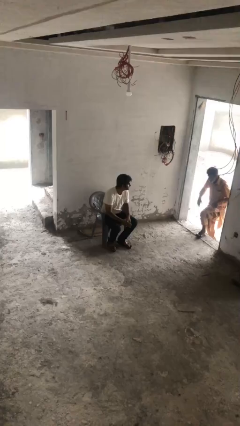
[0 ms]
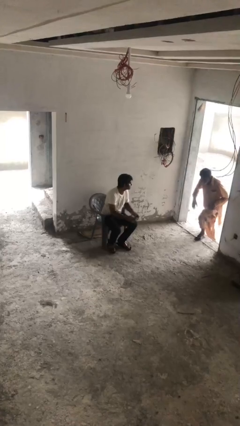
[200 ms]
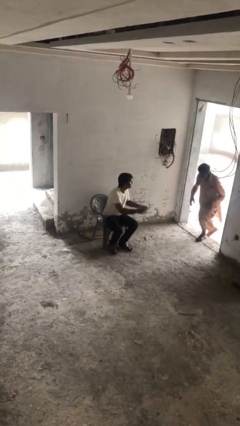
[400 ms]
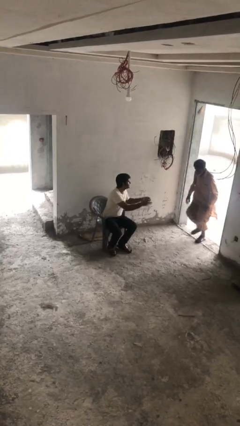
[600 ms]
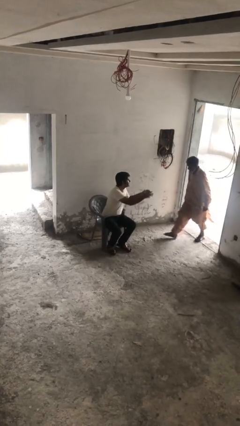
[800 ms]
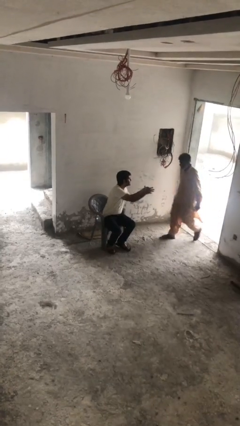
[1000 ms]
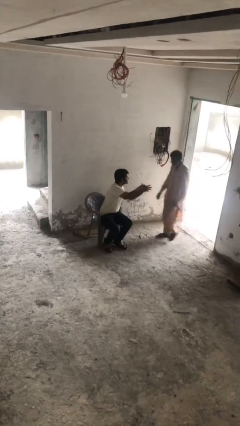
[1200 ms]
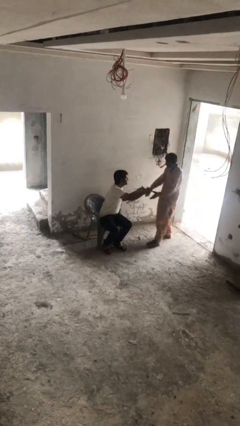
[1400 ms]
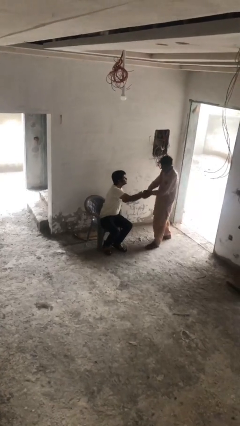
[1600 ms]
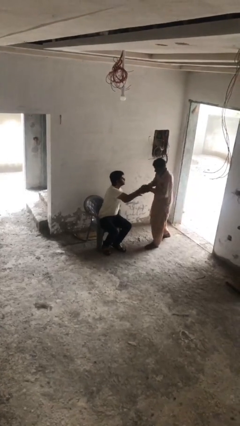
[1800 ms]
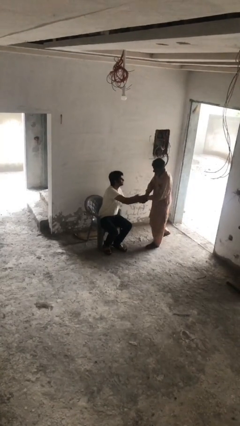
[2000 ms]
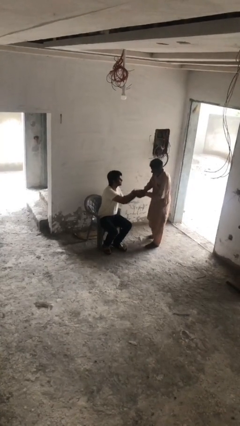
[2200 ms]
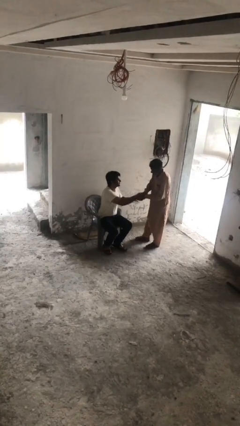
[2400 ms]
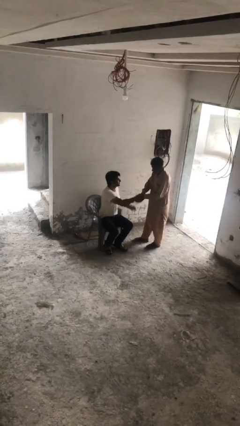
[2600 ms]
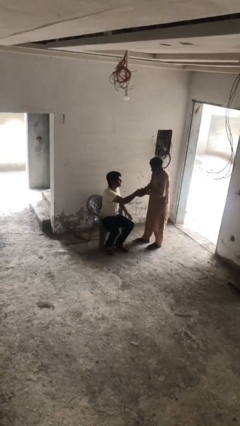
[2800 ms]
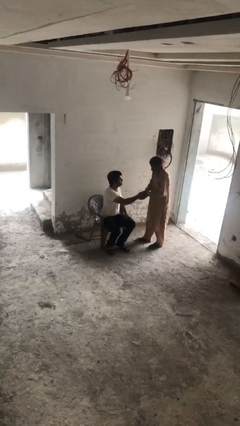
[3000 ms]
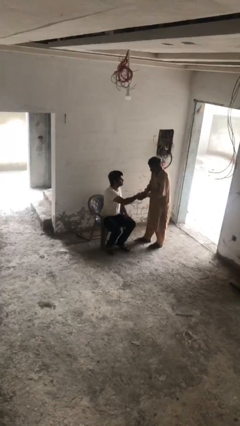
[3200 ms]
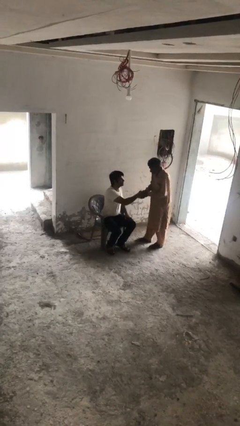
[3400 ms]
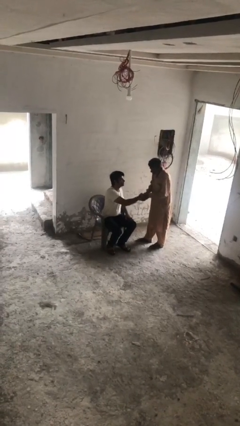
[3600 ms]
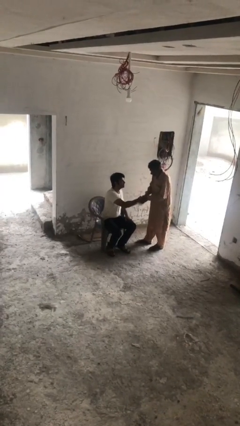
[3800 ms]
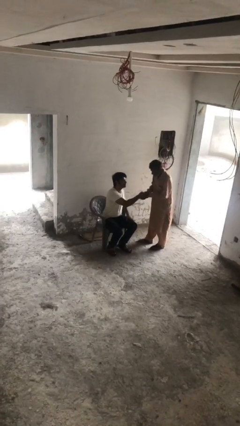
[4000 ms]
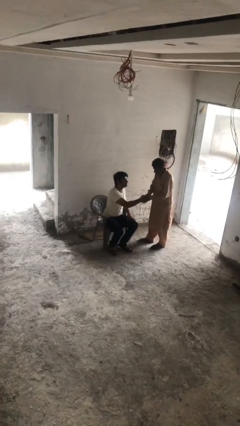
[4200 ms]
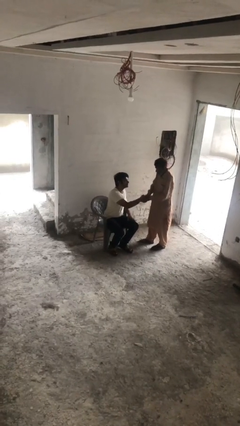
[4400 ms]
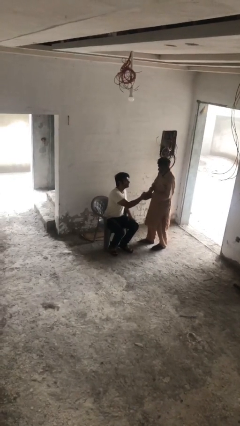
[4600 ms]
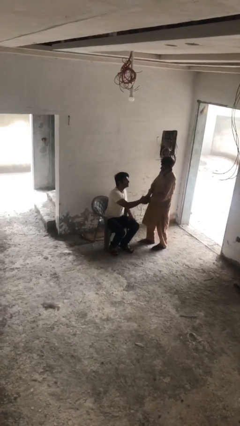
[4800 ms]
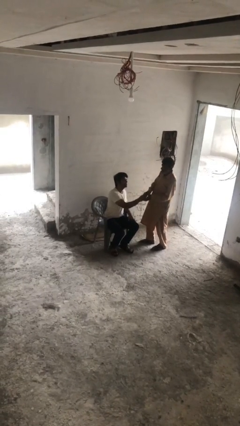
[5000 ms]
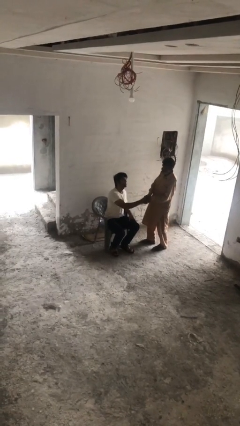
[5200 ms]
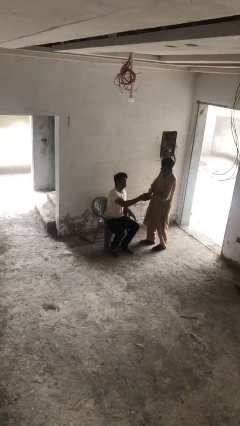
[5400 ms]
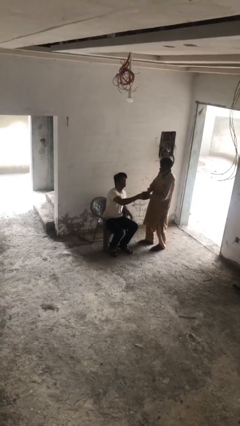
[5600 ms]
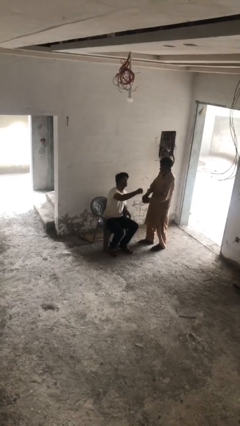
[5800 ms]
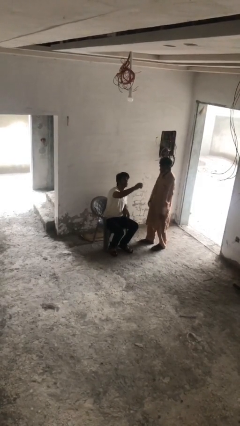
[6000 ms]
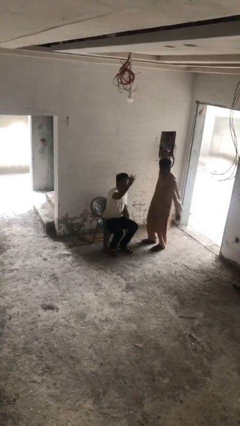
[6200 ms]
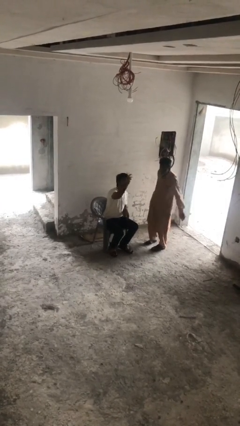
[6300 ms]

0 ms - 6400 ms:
person shakes hand

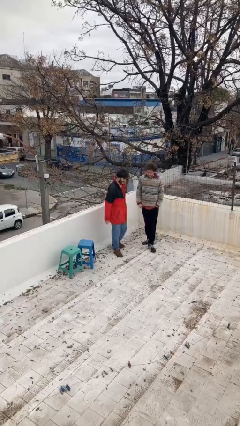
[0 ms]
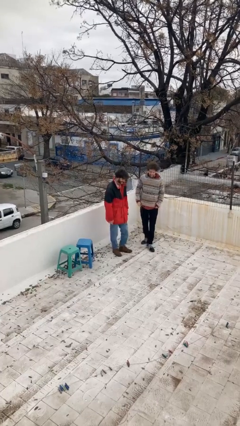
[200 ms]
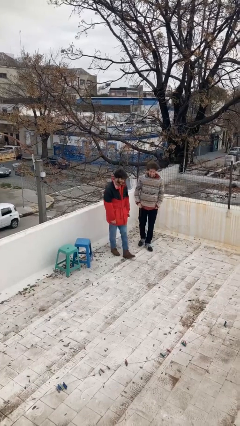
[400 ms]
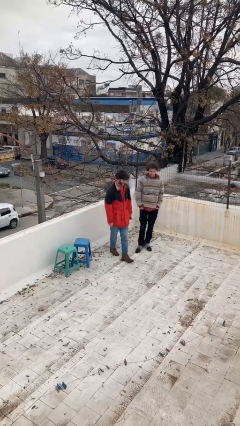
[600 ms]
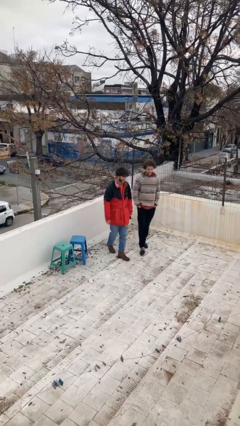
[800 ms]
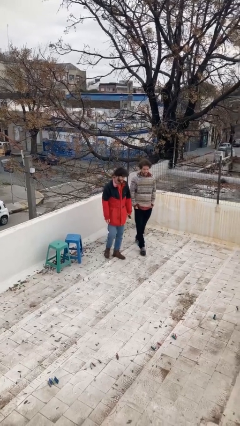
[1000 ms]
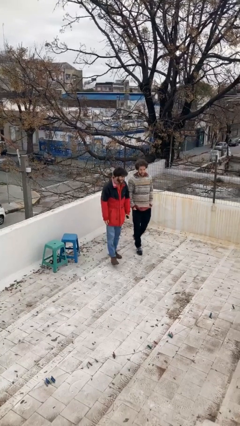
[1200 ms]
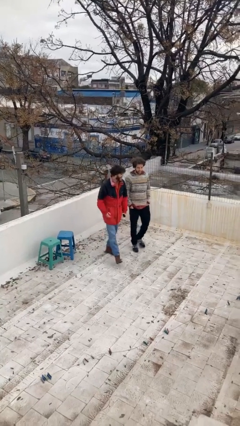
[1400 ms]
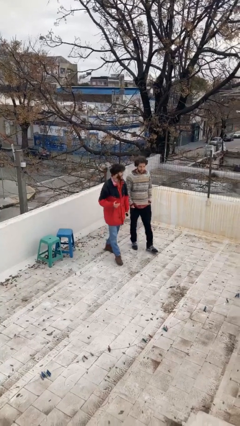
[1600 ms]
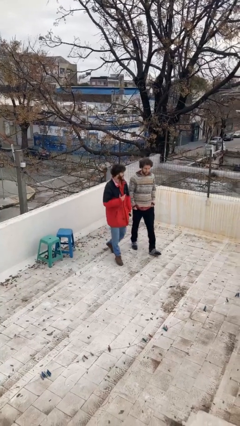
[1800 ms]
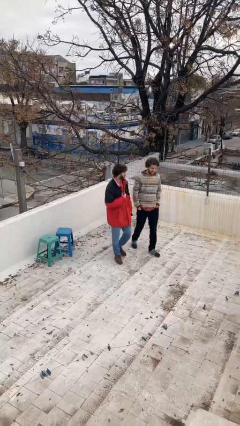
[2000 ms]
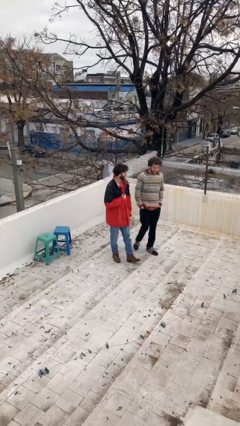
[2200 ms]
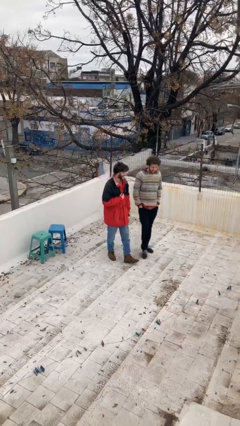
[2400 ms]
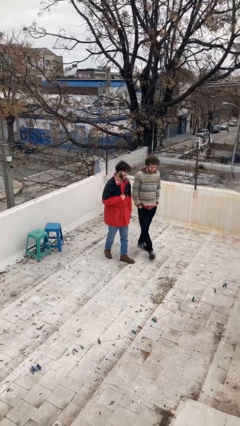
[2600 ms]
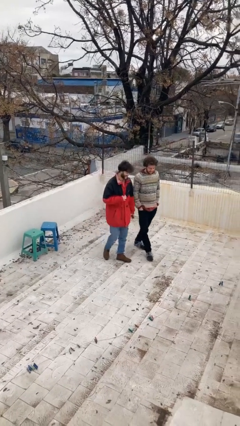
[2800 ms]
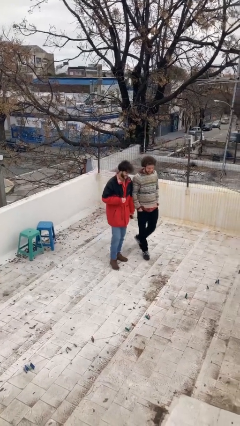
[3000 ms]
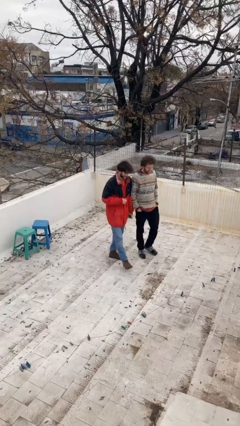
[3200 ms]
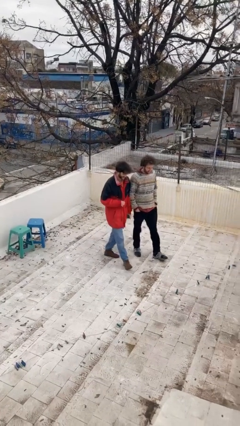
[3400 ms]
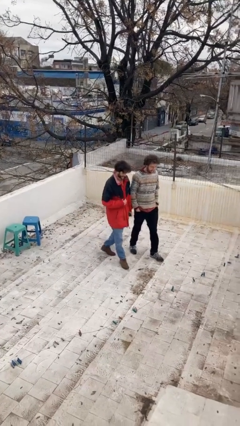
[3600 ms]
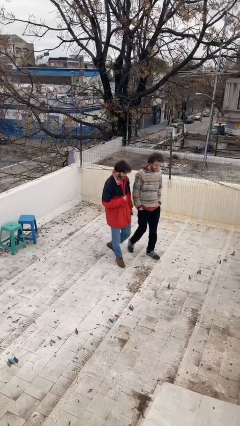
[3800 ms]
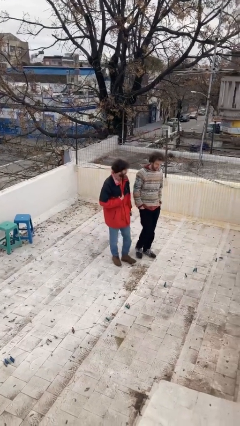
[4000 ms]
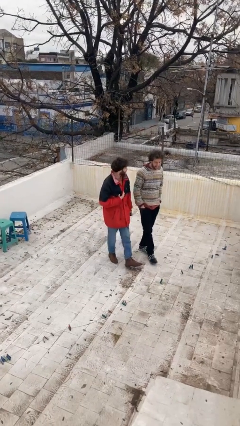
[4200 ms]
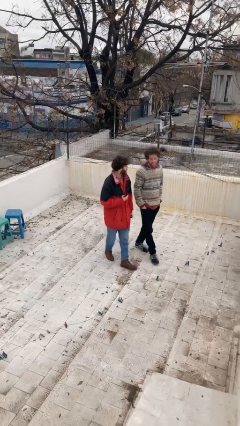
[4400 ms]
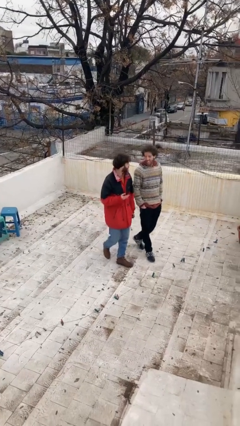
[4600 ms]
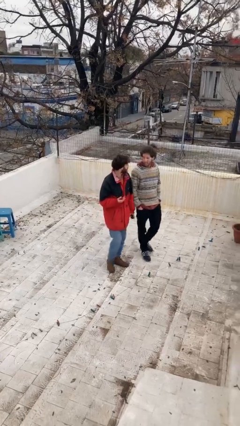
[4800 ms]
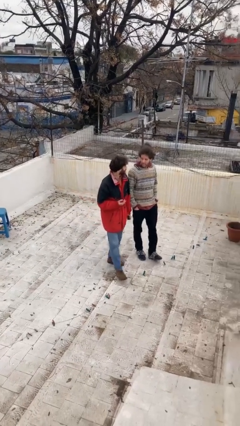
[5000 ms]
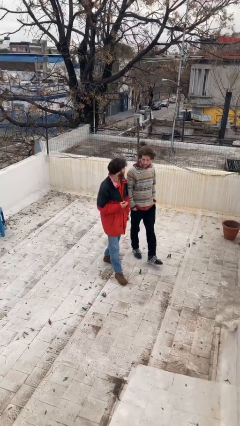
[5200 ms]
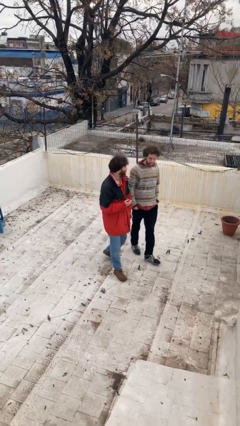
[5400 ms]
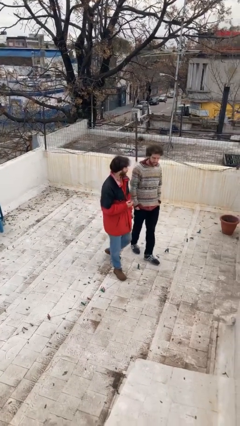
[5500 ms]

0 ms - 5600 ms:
person talks to person

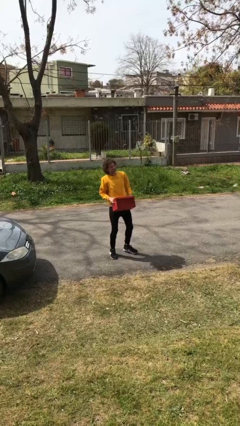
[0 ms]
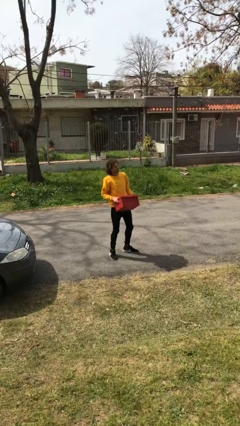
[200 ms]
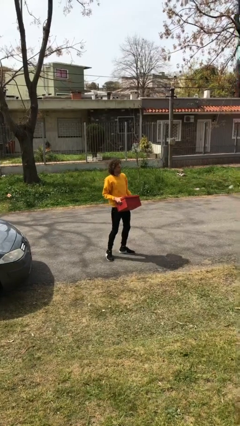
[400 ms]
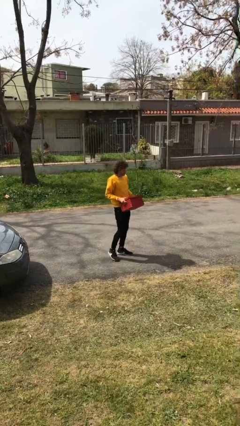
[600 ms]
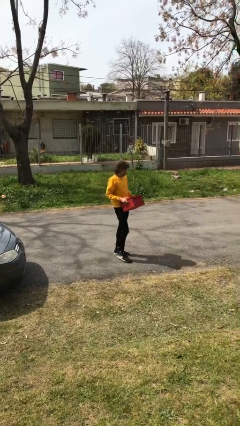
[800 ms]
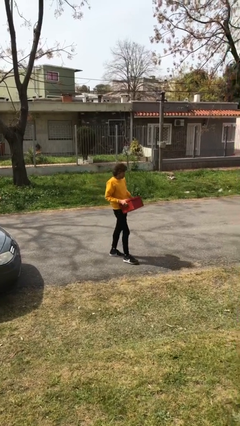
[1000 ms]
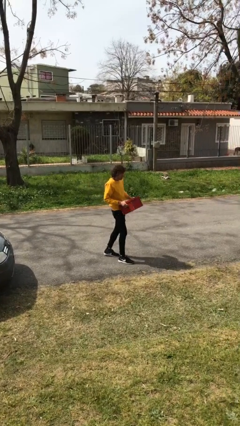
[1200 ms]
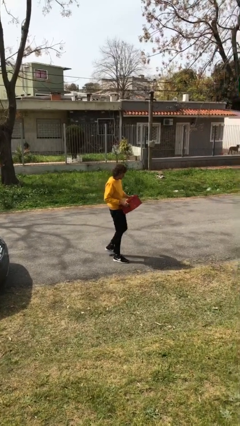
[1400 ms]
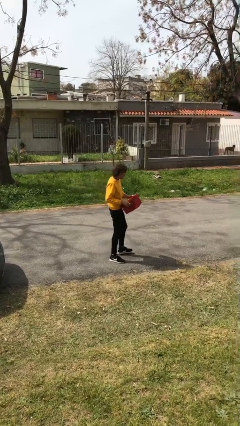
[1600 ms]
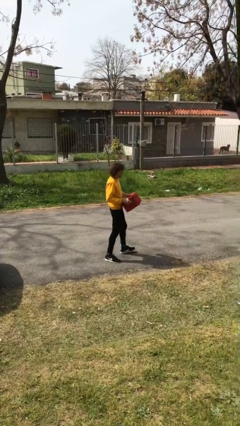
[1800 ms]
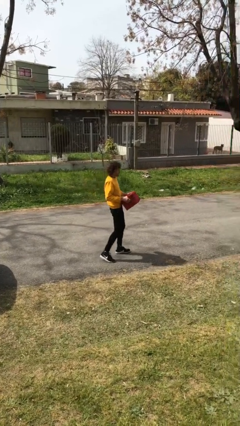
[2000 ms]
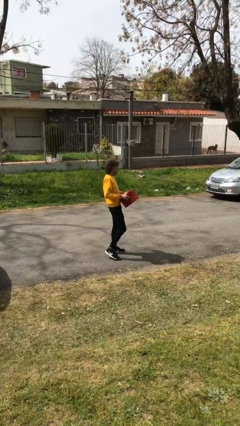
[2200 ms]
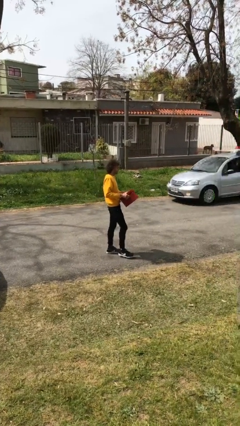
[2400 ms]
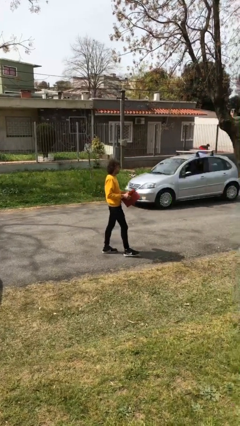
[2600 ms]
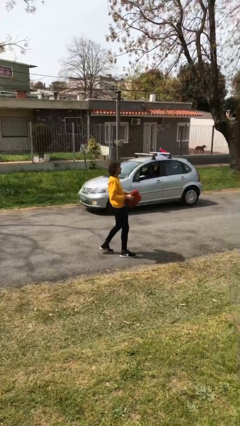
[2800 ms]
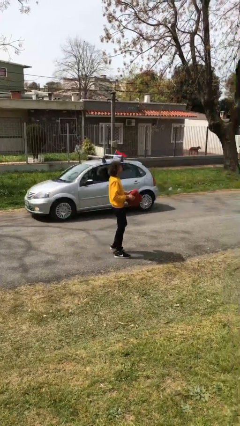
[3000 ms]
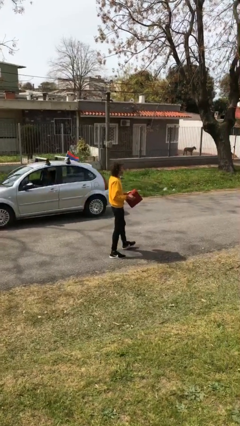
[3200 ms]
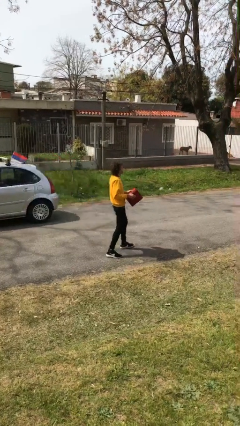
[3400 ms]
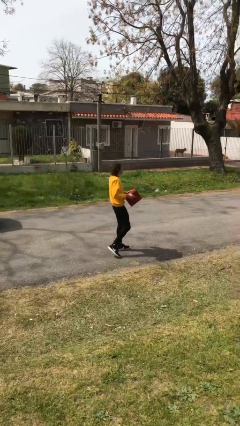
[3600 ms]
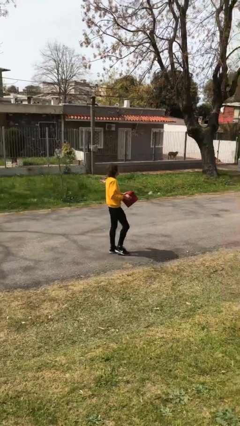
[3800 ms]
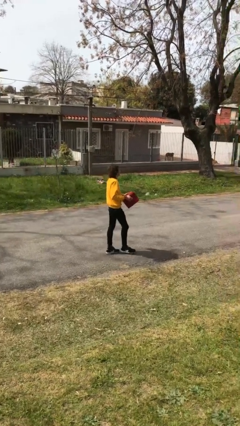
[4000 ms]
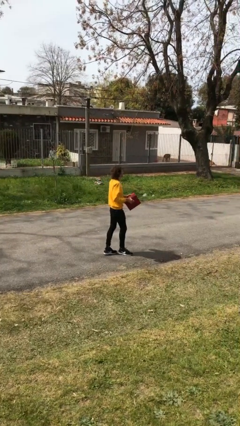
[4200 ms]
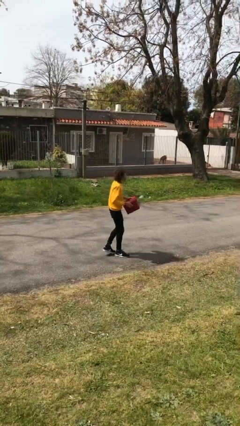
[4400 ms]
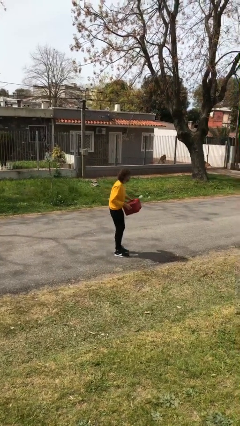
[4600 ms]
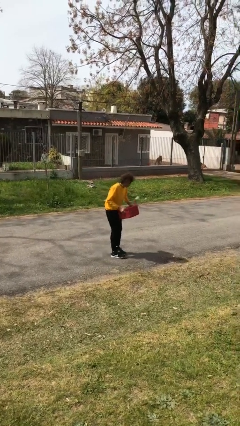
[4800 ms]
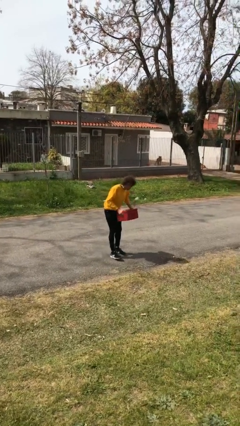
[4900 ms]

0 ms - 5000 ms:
person carries heavy object

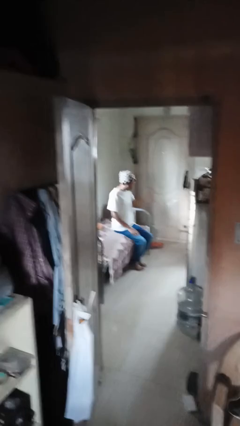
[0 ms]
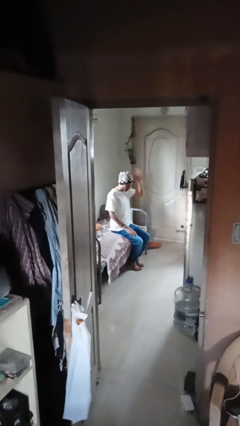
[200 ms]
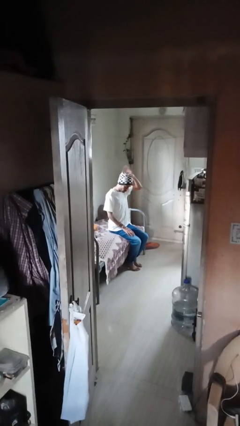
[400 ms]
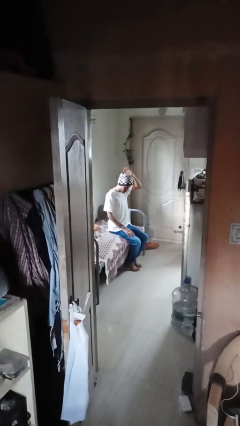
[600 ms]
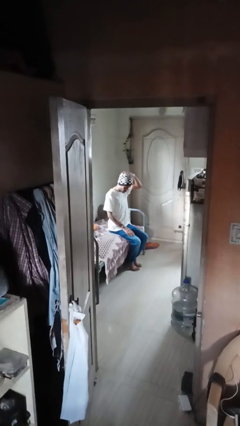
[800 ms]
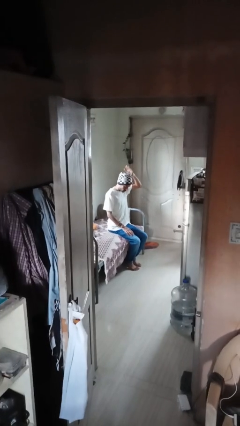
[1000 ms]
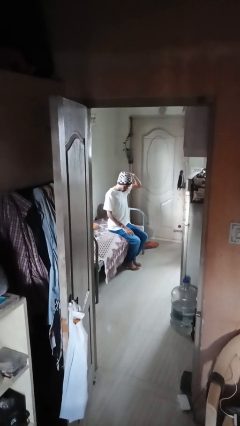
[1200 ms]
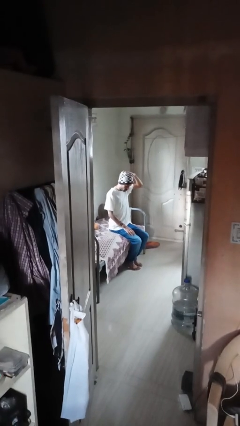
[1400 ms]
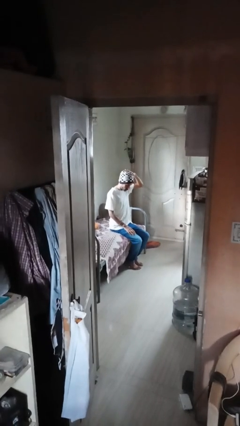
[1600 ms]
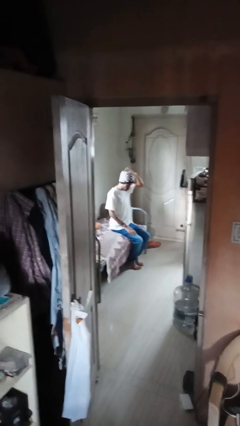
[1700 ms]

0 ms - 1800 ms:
person pats head
